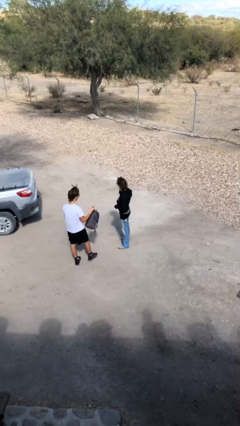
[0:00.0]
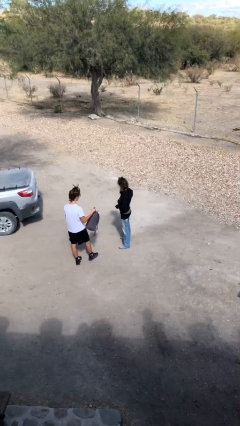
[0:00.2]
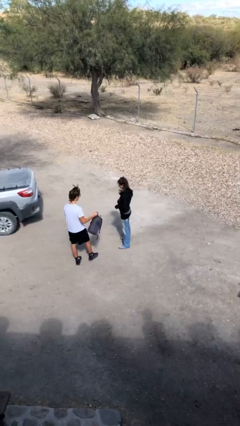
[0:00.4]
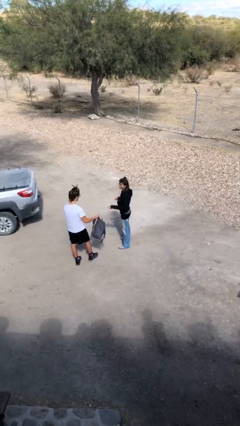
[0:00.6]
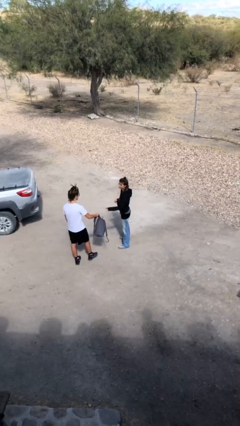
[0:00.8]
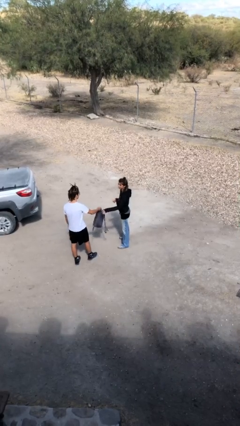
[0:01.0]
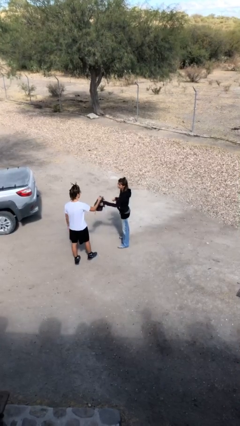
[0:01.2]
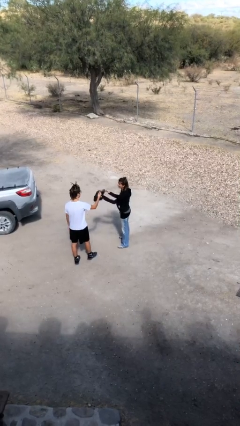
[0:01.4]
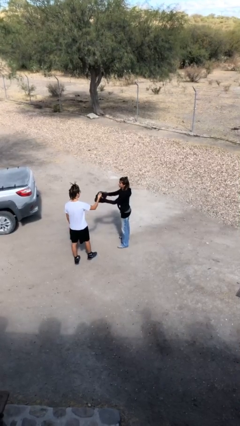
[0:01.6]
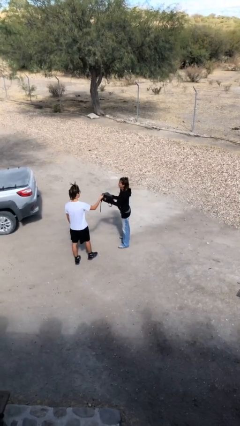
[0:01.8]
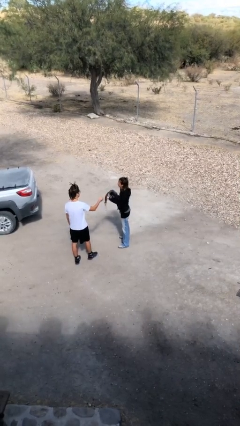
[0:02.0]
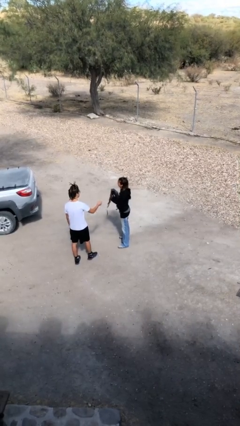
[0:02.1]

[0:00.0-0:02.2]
person transfers object to person

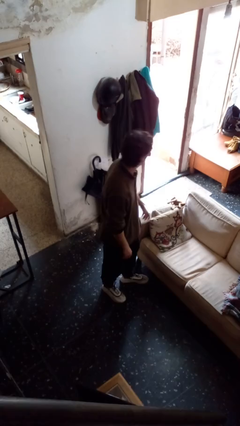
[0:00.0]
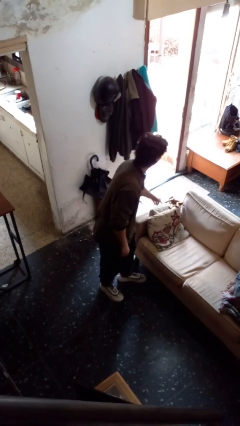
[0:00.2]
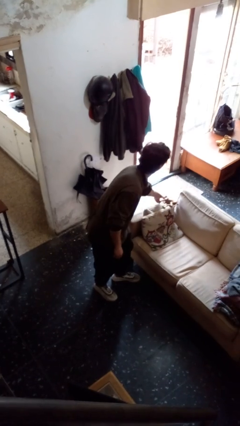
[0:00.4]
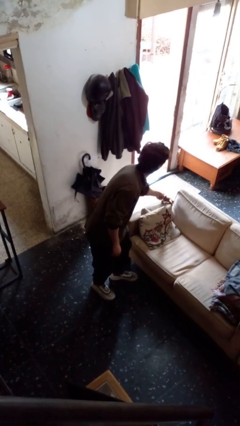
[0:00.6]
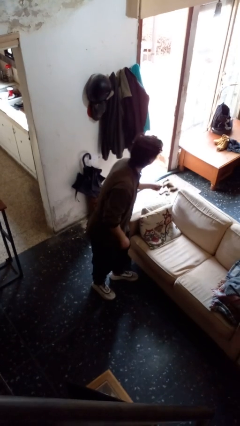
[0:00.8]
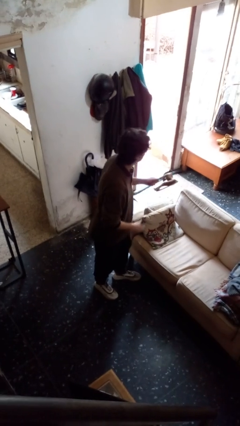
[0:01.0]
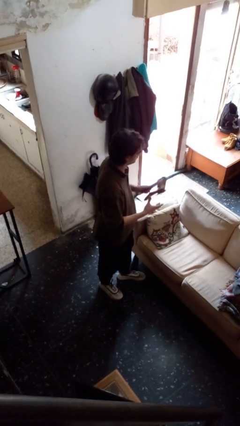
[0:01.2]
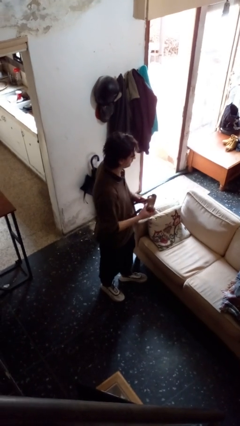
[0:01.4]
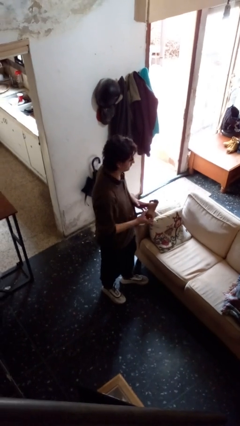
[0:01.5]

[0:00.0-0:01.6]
person picks up object from couch

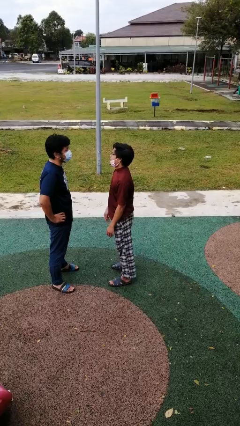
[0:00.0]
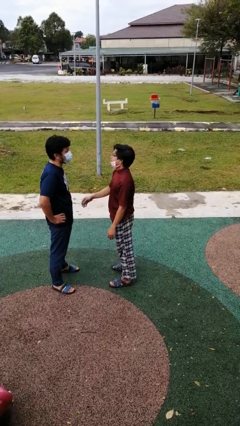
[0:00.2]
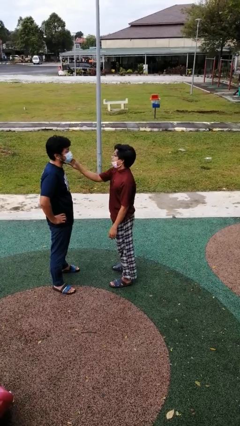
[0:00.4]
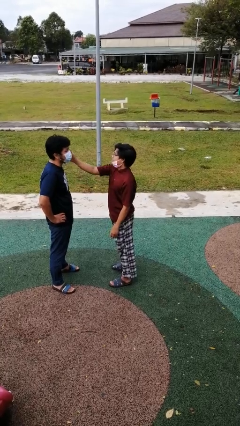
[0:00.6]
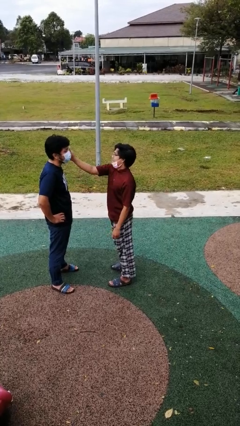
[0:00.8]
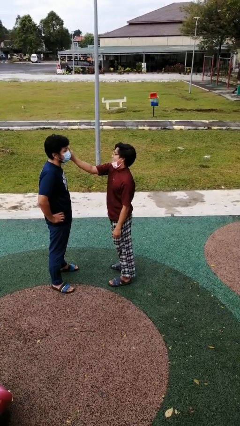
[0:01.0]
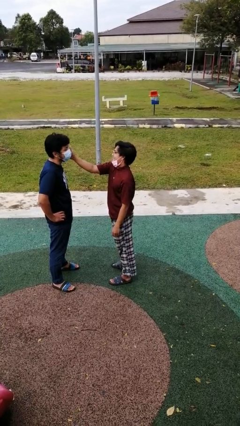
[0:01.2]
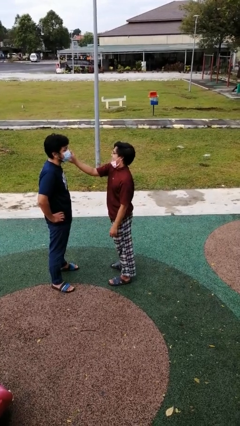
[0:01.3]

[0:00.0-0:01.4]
person touches face of person

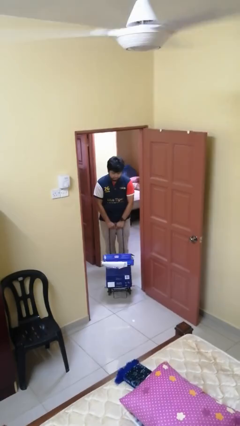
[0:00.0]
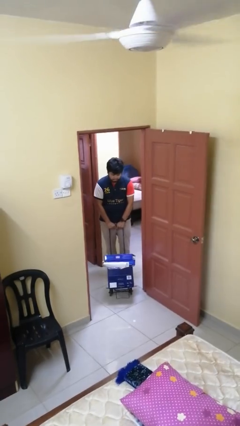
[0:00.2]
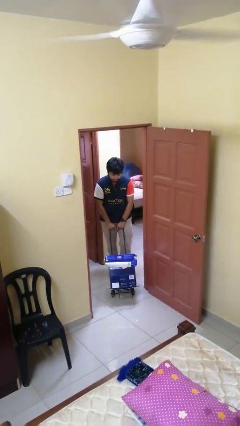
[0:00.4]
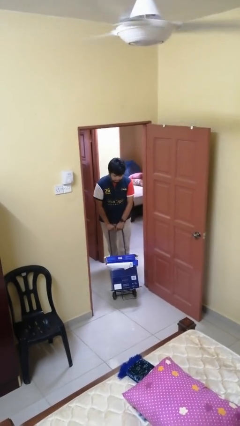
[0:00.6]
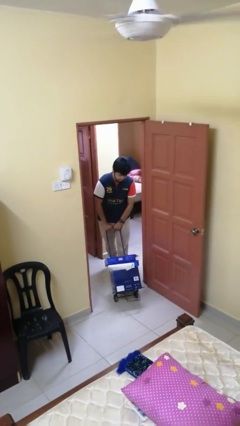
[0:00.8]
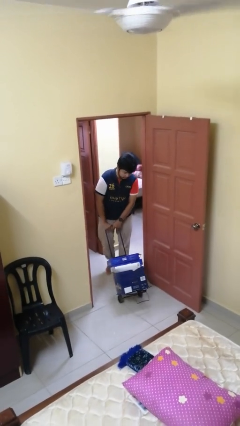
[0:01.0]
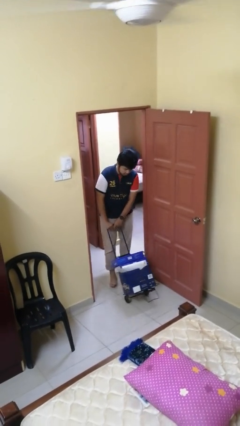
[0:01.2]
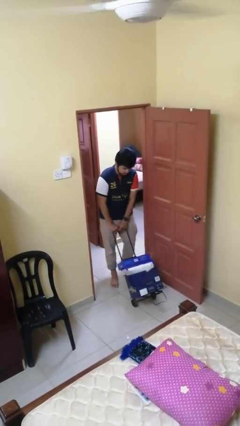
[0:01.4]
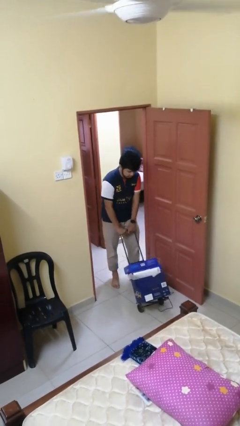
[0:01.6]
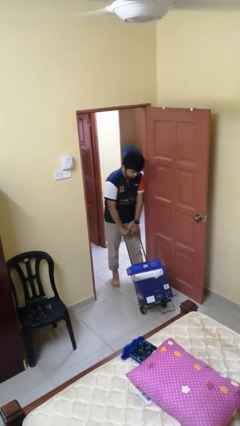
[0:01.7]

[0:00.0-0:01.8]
person pushes wheeled cart

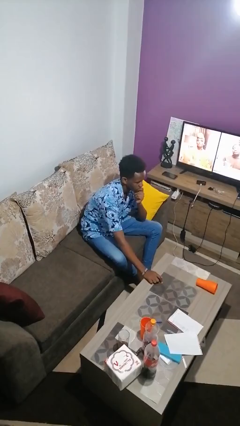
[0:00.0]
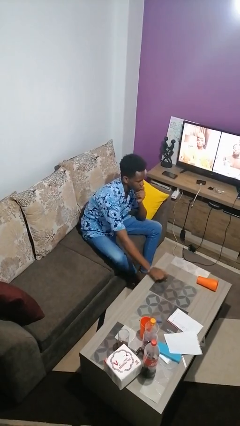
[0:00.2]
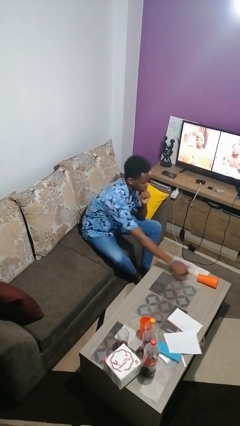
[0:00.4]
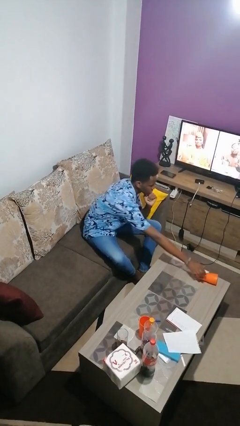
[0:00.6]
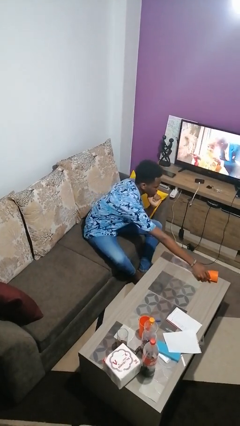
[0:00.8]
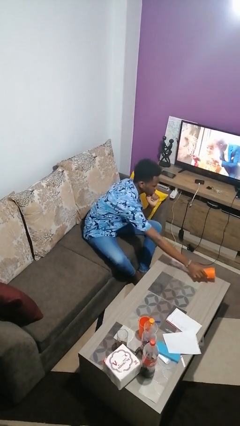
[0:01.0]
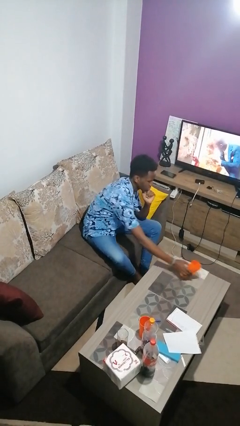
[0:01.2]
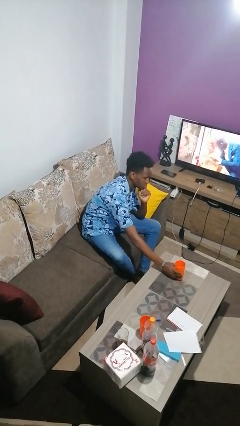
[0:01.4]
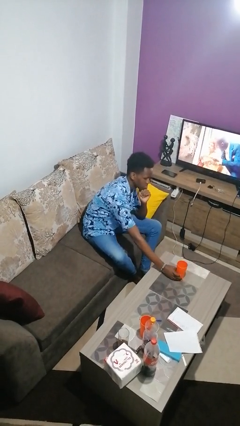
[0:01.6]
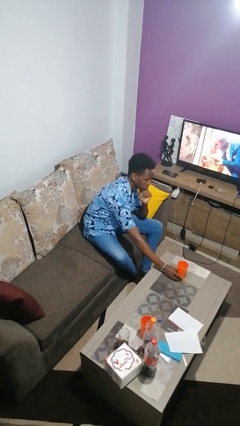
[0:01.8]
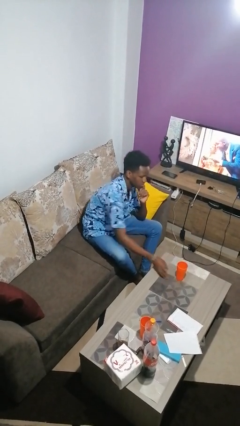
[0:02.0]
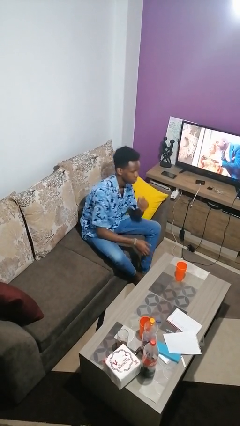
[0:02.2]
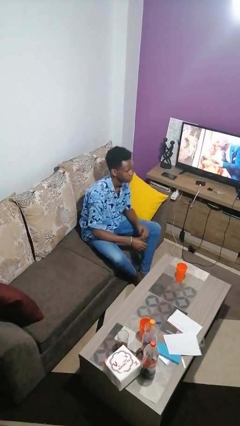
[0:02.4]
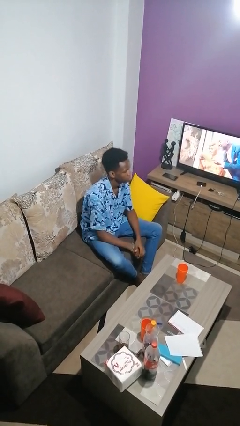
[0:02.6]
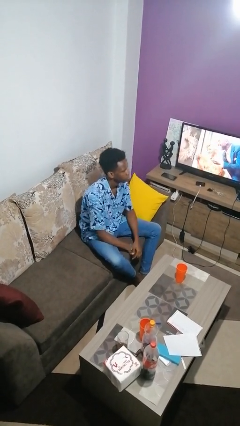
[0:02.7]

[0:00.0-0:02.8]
person sets upright glass

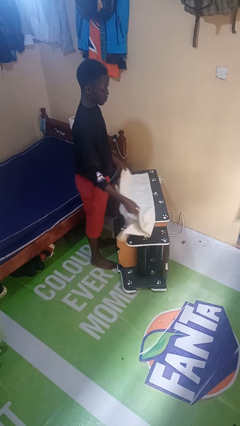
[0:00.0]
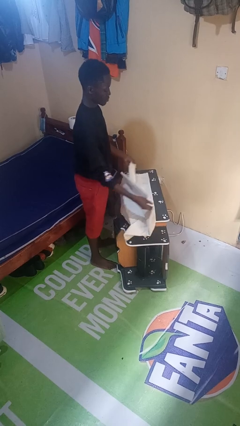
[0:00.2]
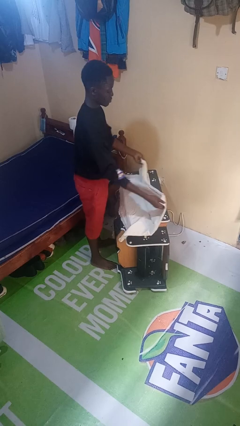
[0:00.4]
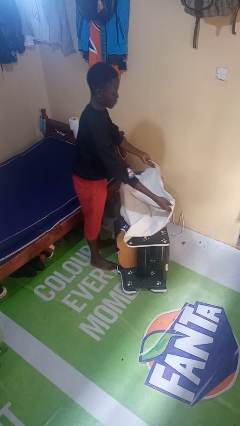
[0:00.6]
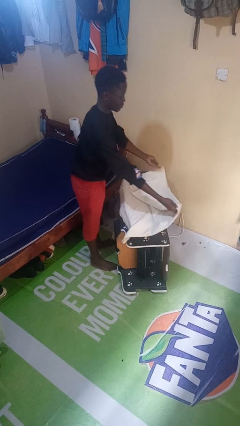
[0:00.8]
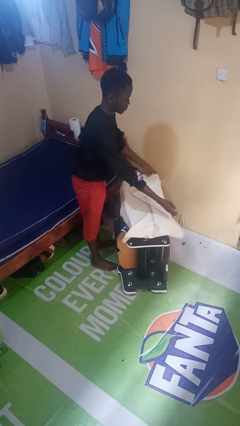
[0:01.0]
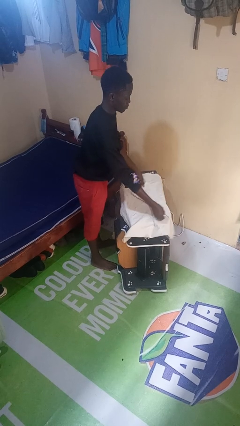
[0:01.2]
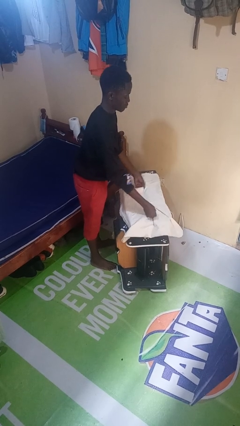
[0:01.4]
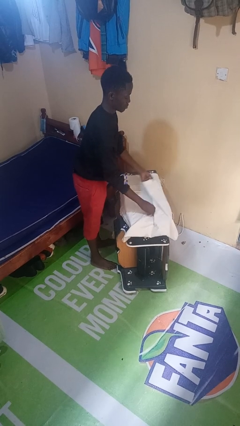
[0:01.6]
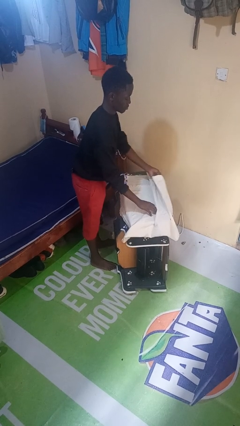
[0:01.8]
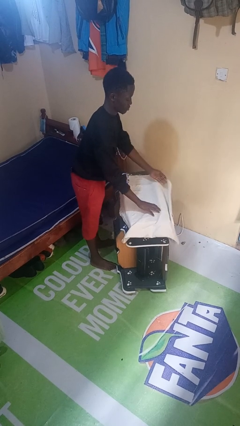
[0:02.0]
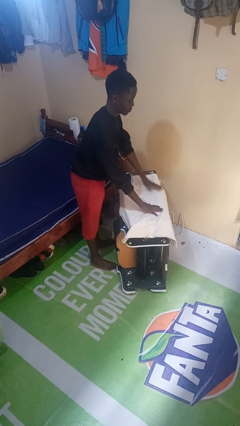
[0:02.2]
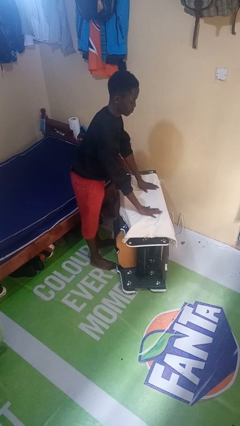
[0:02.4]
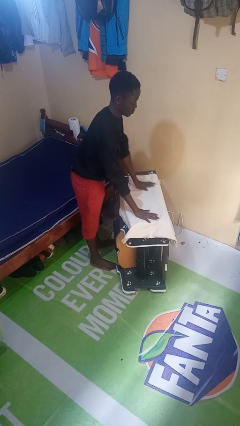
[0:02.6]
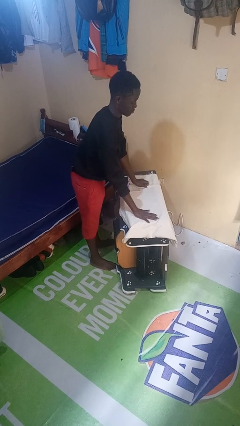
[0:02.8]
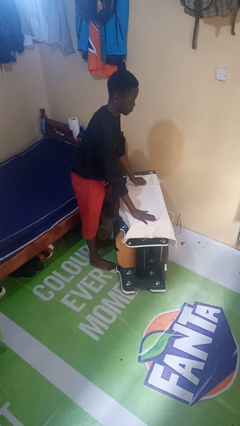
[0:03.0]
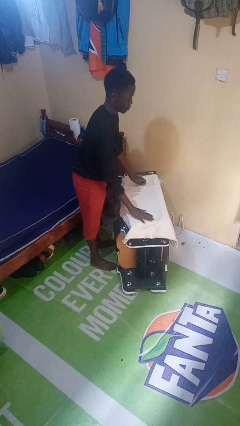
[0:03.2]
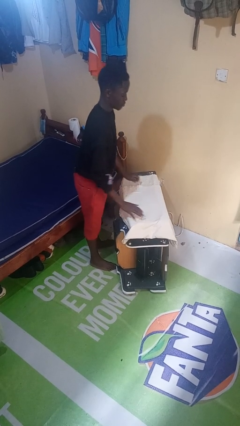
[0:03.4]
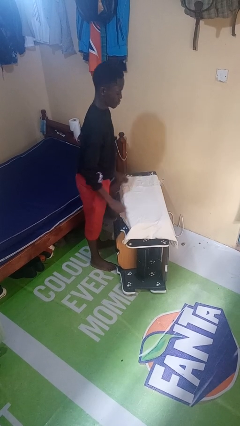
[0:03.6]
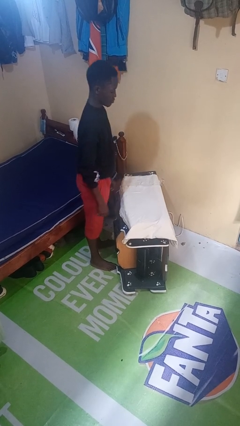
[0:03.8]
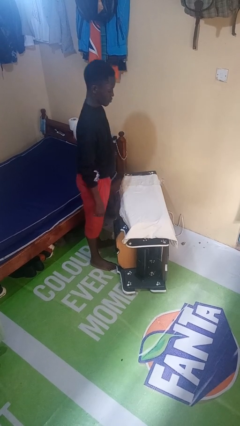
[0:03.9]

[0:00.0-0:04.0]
person spreads tablecloth

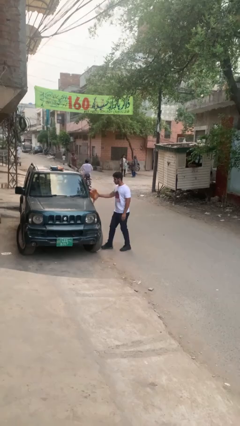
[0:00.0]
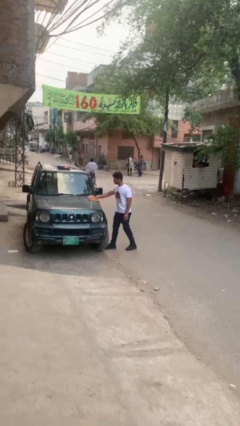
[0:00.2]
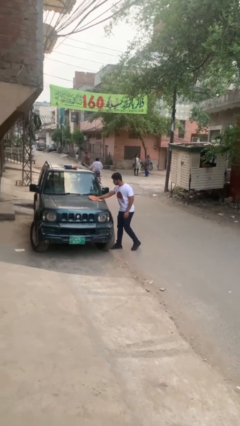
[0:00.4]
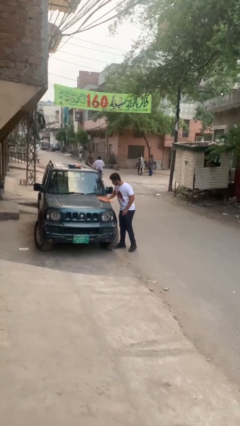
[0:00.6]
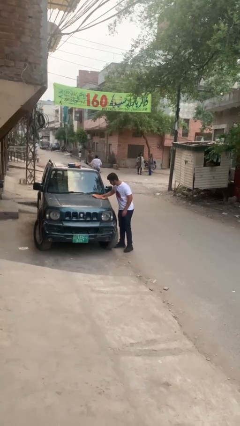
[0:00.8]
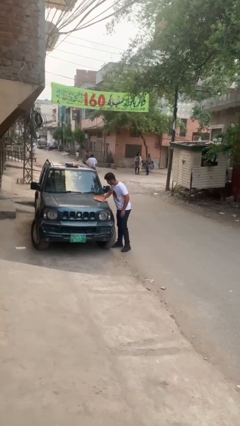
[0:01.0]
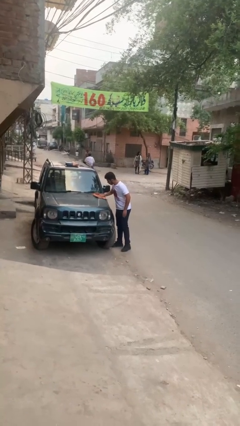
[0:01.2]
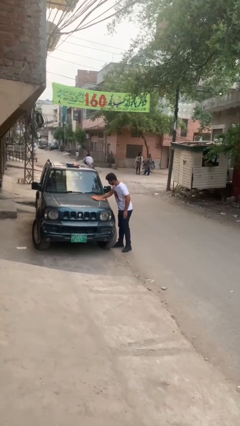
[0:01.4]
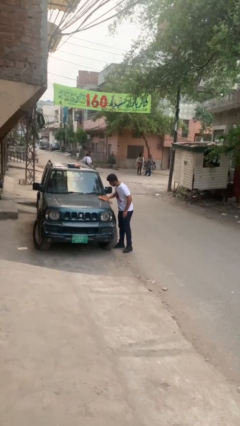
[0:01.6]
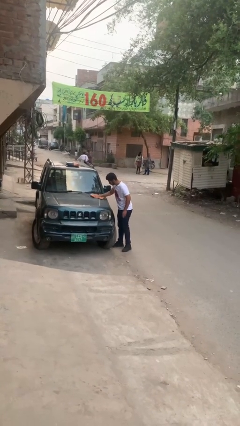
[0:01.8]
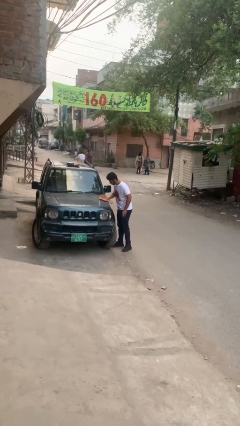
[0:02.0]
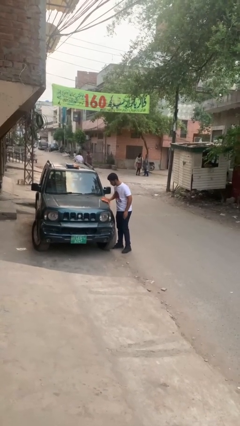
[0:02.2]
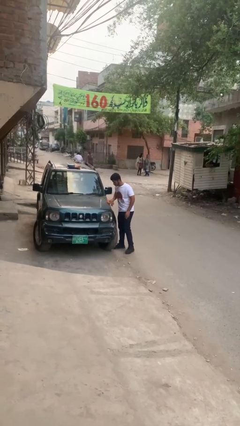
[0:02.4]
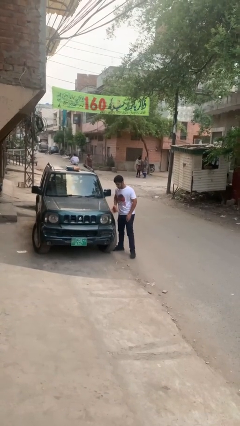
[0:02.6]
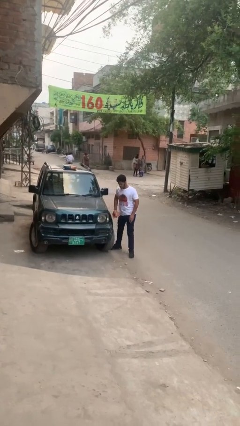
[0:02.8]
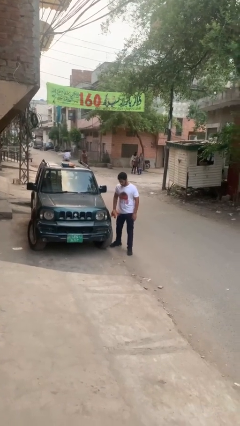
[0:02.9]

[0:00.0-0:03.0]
person polishes car with rag
